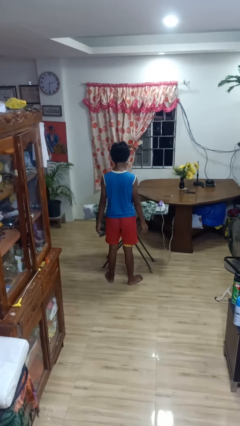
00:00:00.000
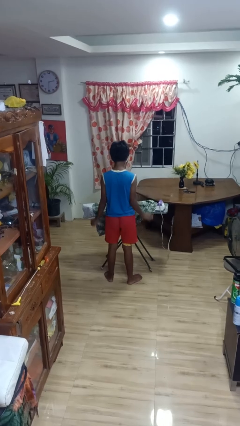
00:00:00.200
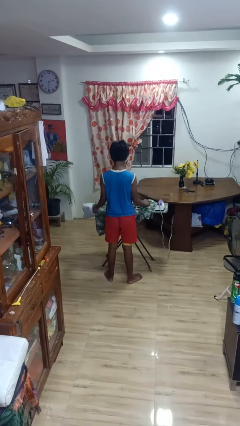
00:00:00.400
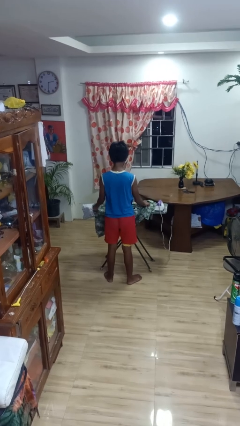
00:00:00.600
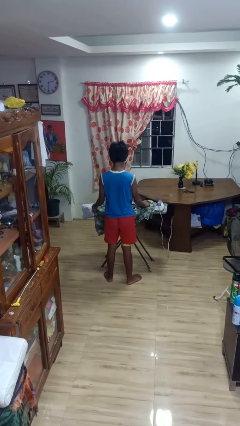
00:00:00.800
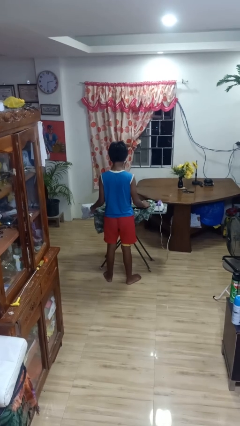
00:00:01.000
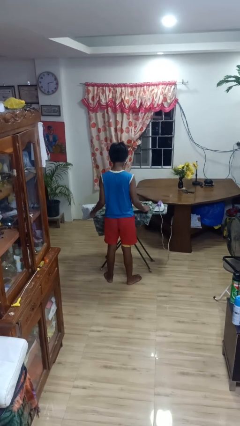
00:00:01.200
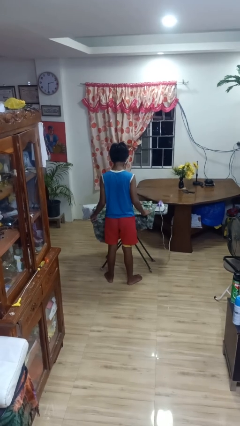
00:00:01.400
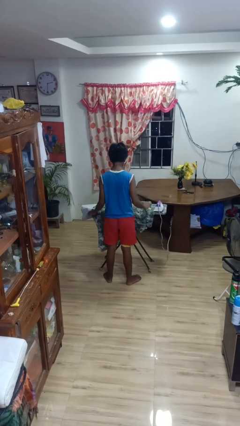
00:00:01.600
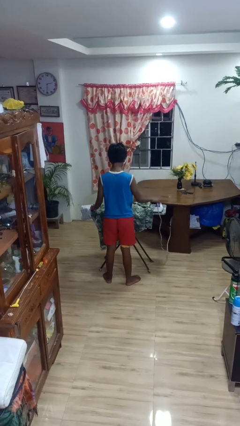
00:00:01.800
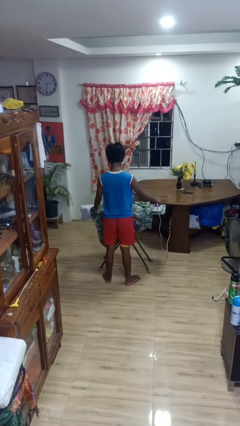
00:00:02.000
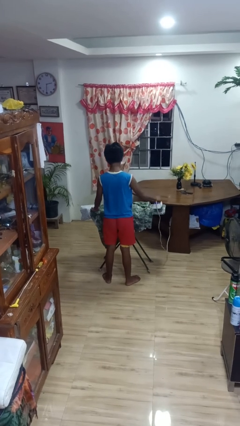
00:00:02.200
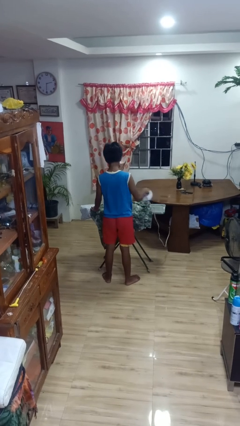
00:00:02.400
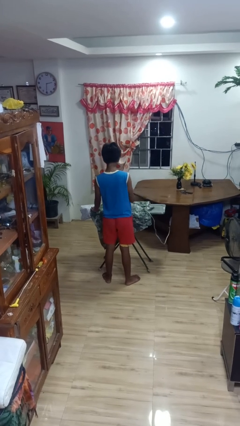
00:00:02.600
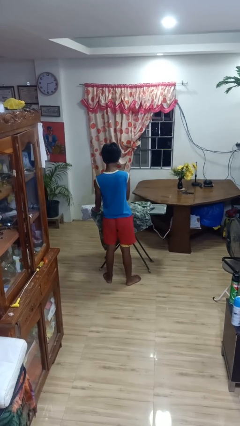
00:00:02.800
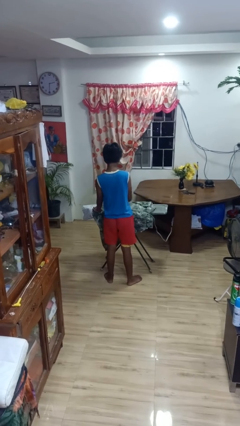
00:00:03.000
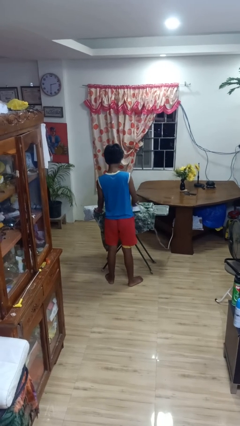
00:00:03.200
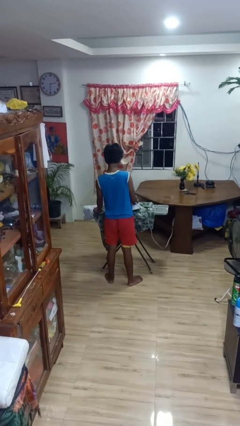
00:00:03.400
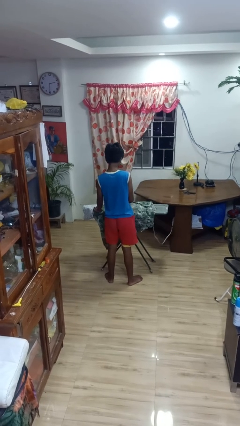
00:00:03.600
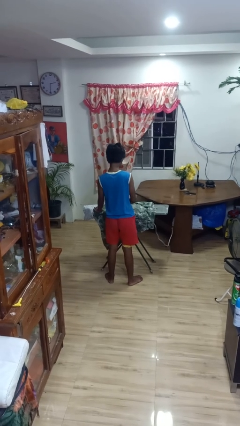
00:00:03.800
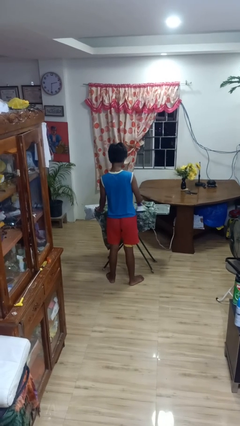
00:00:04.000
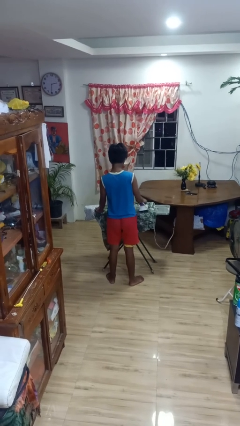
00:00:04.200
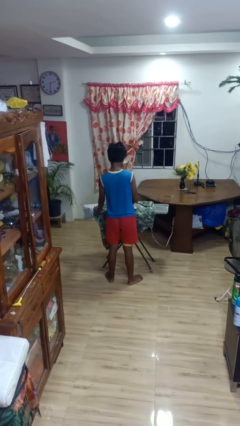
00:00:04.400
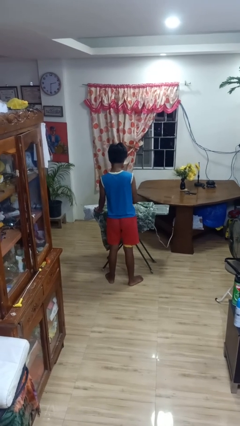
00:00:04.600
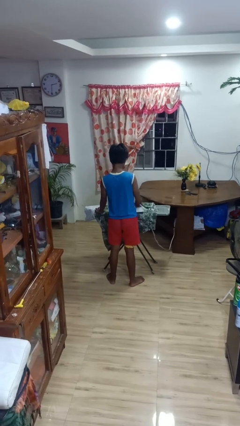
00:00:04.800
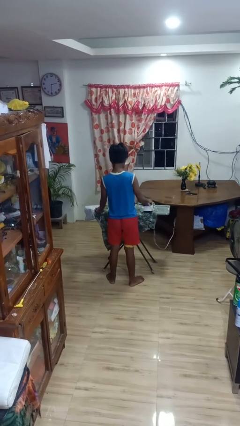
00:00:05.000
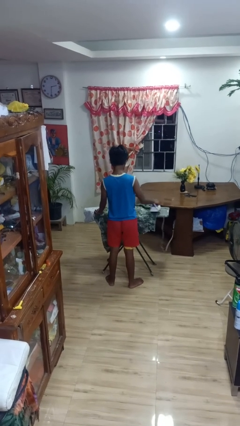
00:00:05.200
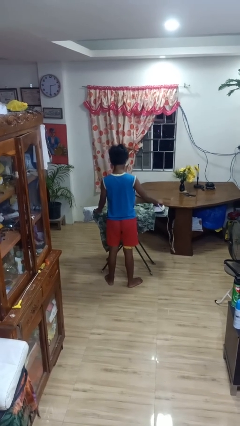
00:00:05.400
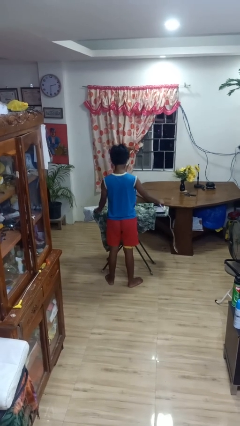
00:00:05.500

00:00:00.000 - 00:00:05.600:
person irons clothes

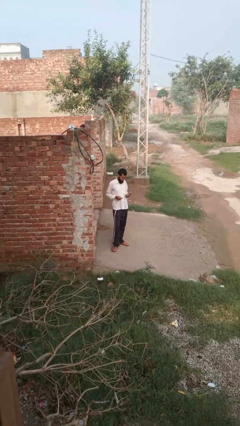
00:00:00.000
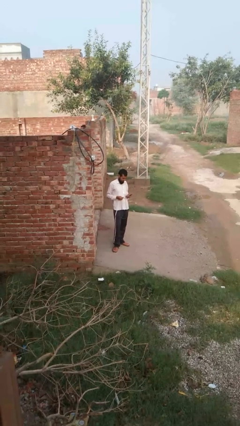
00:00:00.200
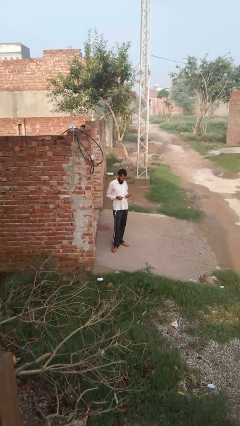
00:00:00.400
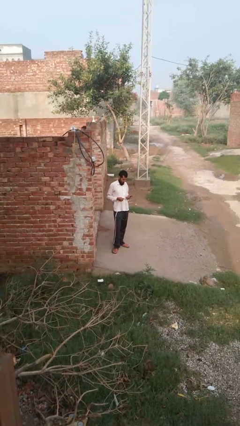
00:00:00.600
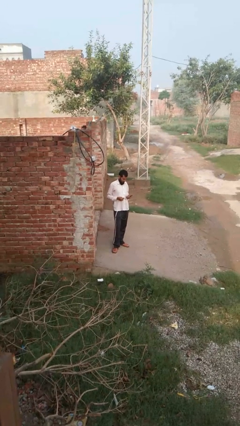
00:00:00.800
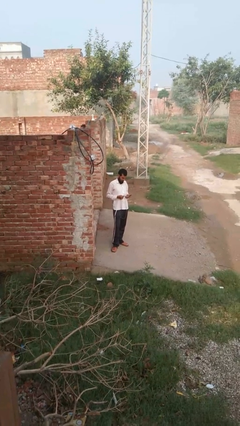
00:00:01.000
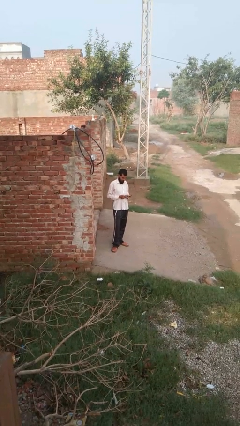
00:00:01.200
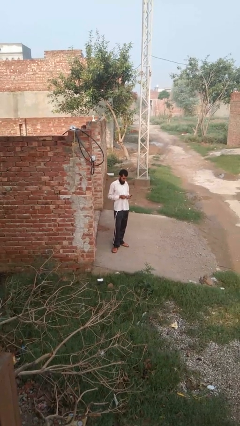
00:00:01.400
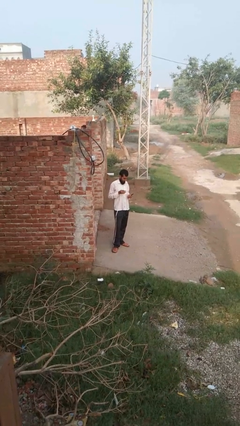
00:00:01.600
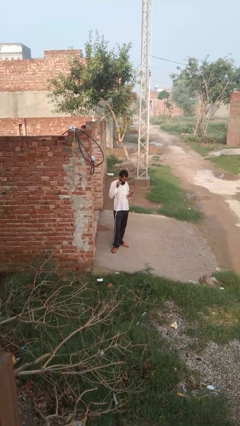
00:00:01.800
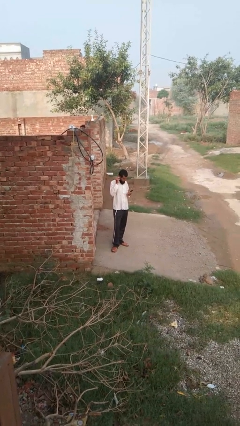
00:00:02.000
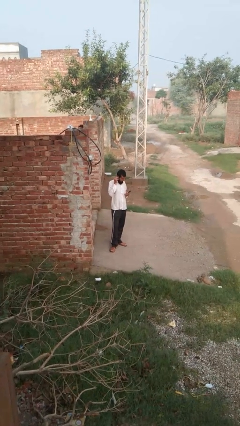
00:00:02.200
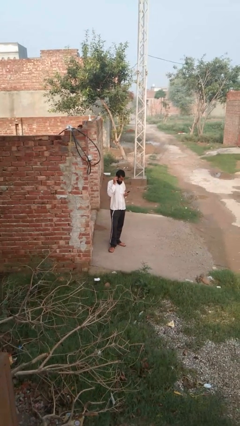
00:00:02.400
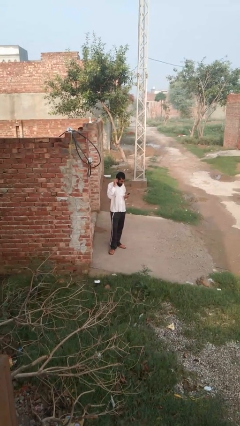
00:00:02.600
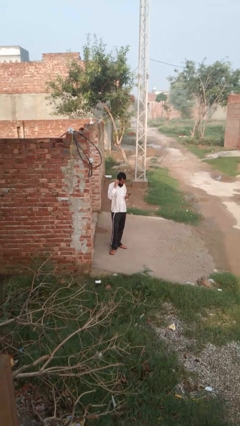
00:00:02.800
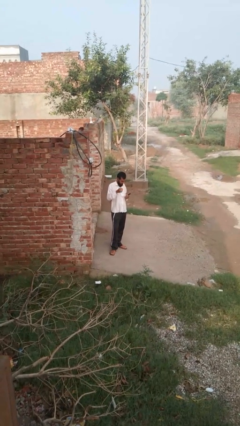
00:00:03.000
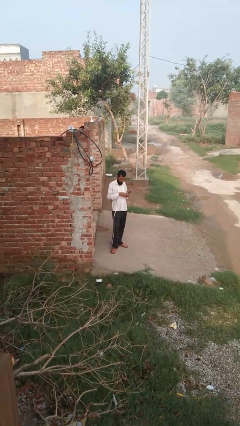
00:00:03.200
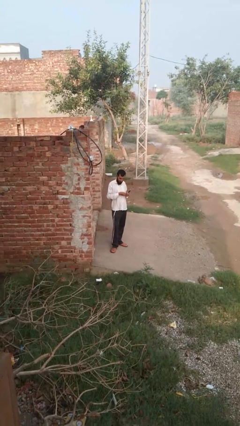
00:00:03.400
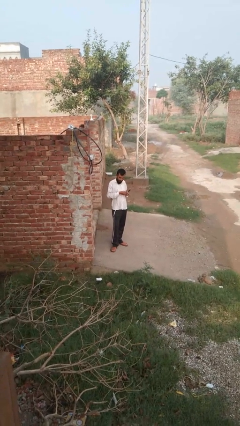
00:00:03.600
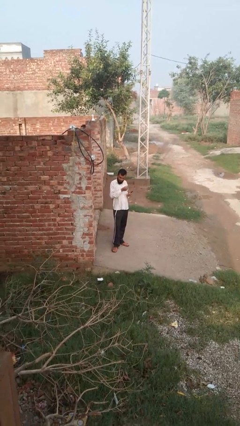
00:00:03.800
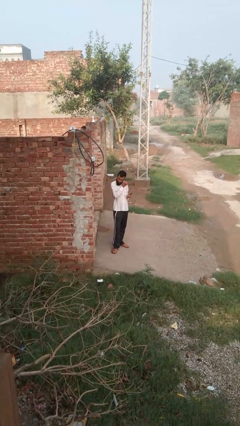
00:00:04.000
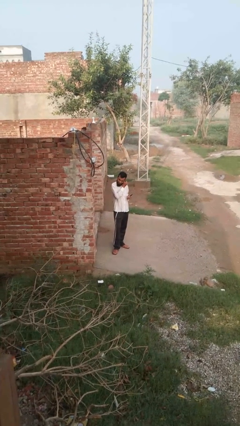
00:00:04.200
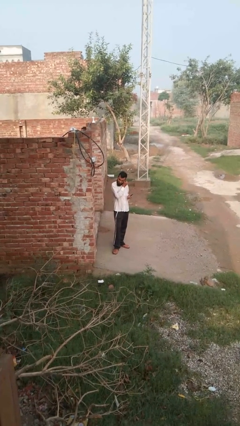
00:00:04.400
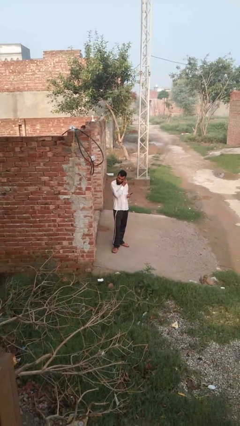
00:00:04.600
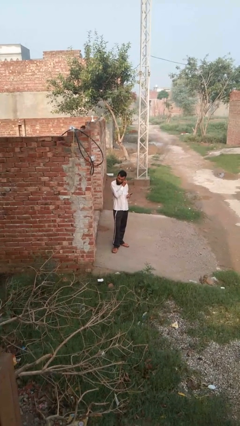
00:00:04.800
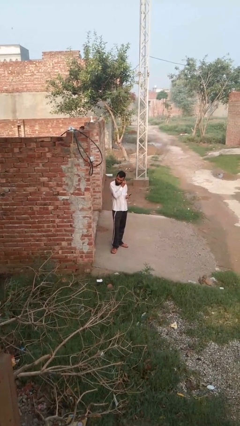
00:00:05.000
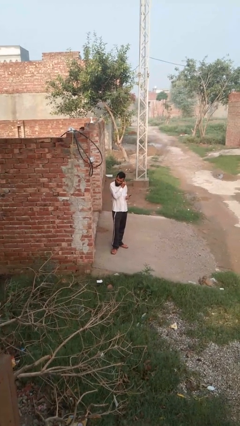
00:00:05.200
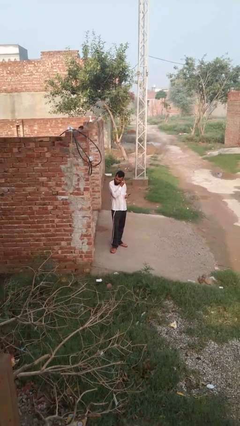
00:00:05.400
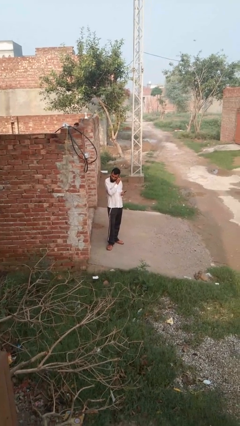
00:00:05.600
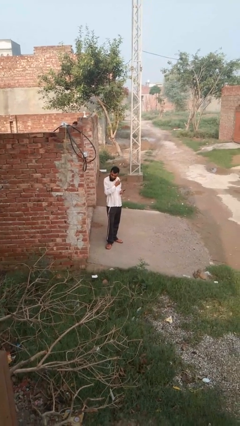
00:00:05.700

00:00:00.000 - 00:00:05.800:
person puts on headphones

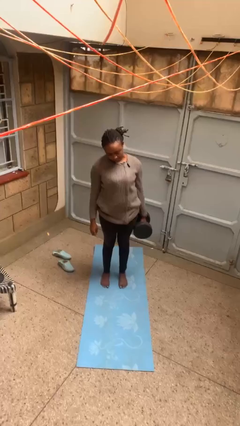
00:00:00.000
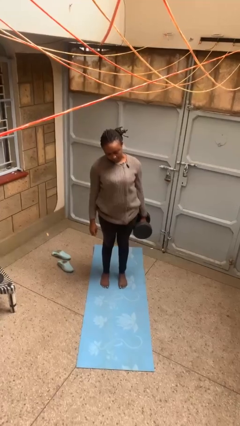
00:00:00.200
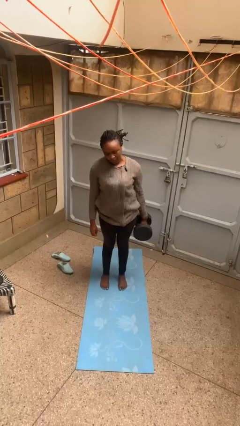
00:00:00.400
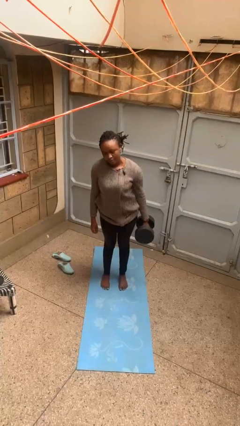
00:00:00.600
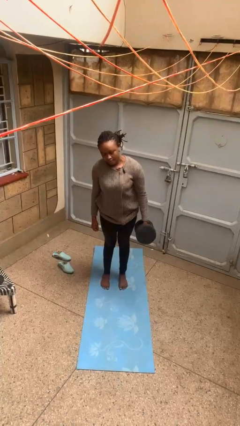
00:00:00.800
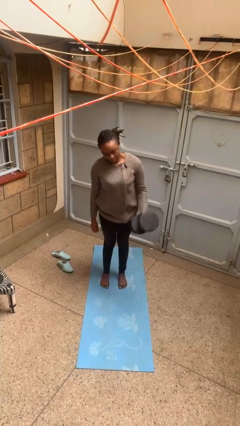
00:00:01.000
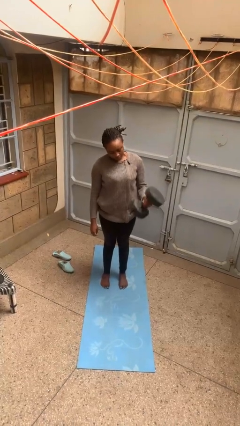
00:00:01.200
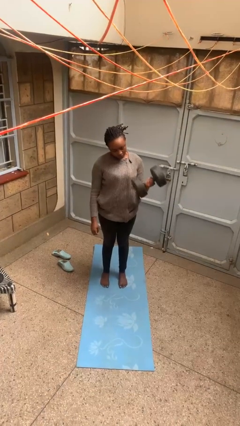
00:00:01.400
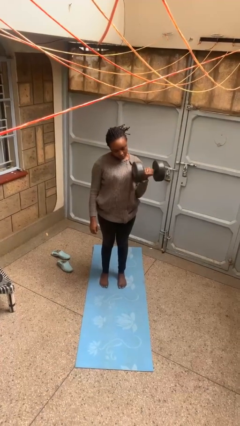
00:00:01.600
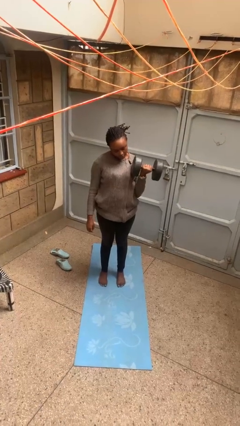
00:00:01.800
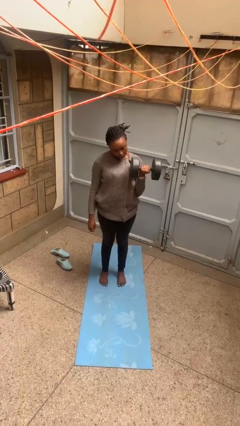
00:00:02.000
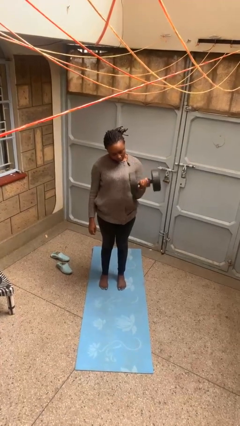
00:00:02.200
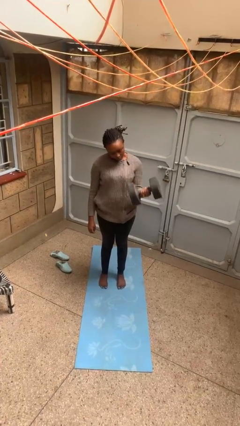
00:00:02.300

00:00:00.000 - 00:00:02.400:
person lifts dumbbells

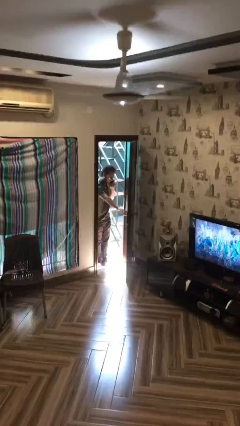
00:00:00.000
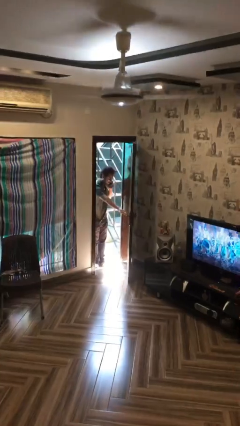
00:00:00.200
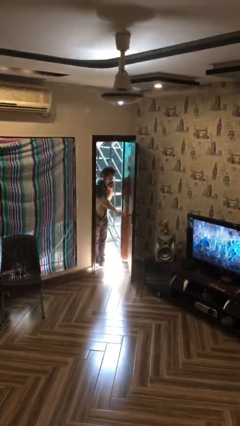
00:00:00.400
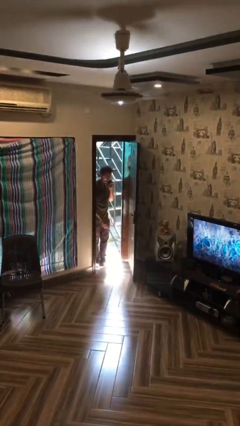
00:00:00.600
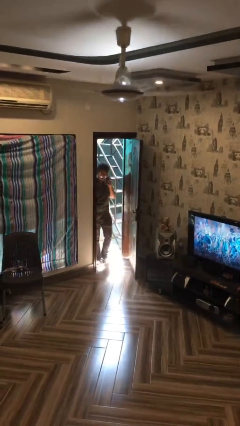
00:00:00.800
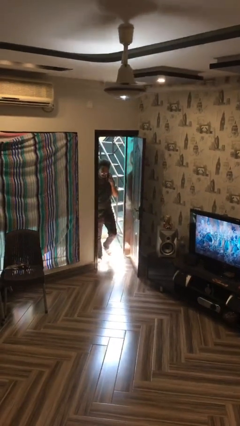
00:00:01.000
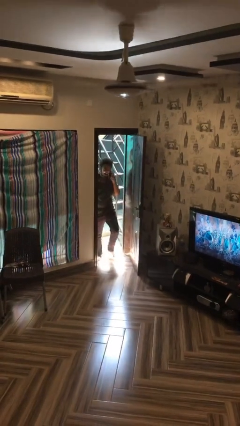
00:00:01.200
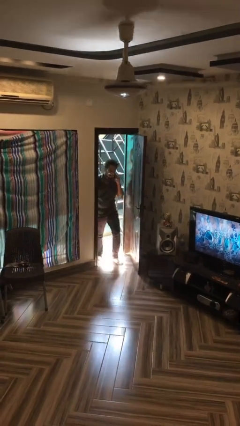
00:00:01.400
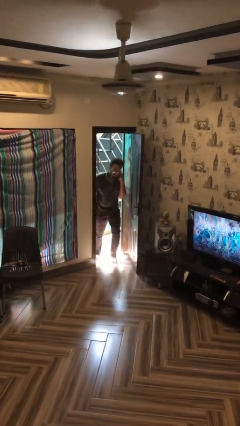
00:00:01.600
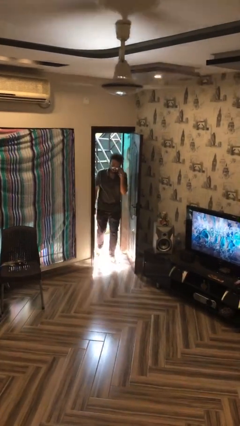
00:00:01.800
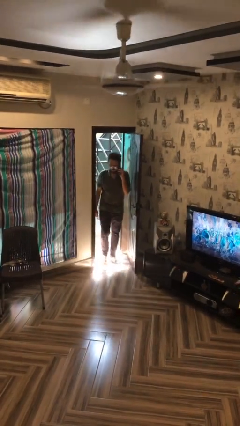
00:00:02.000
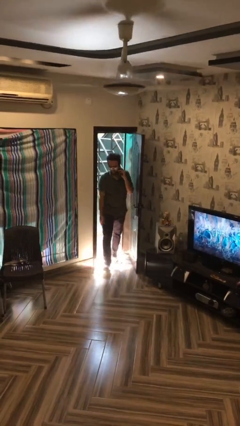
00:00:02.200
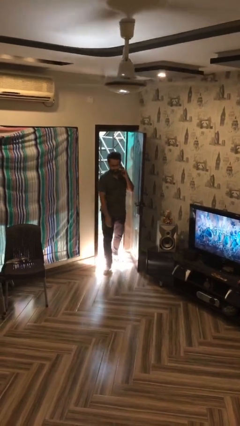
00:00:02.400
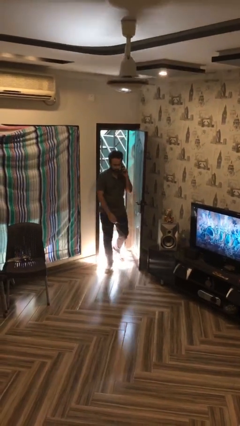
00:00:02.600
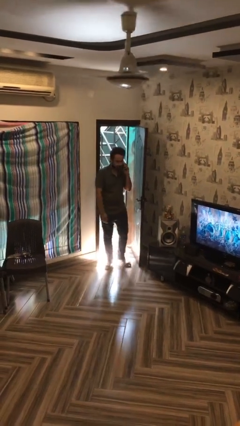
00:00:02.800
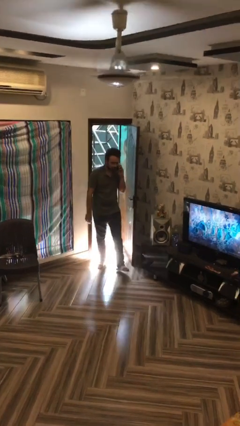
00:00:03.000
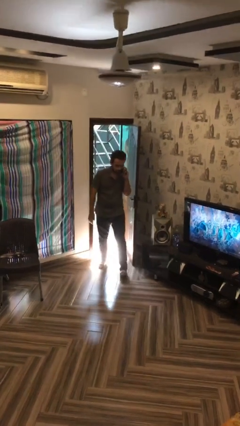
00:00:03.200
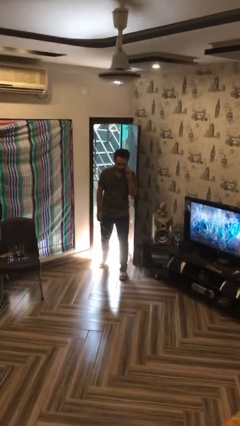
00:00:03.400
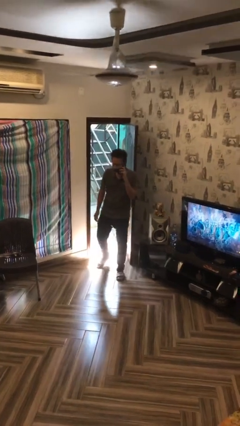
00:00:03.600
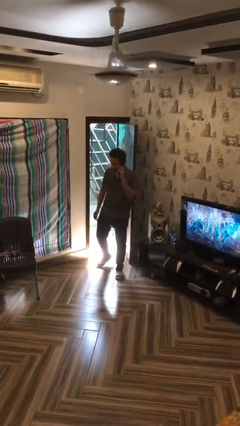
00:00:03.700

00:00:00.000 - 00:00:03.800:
person enters scene through structure
